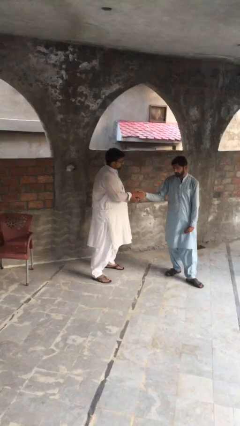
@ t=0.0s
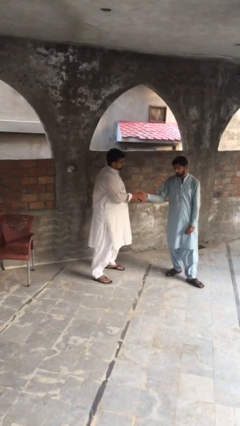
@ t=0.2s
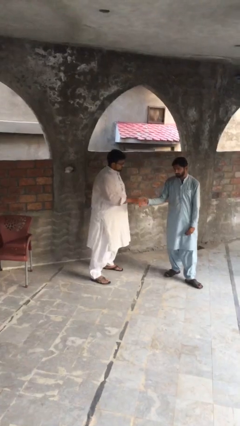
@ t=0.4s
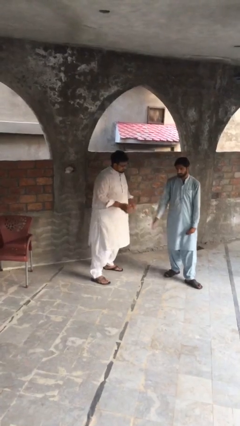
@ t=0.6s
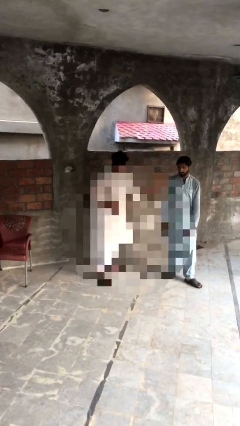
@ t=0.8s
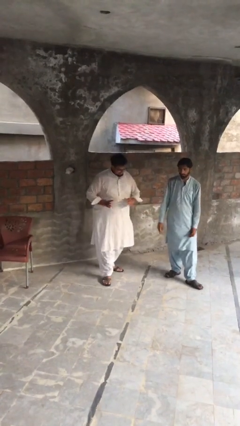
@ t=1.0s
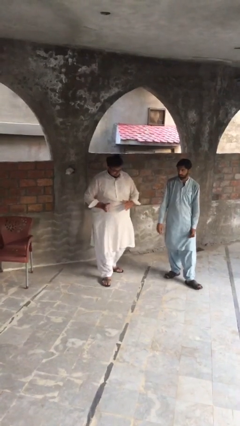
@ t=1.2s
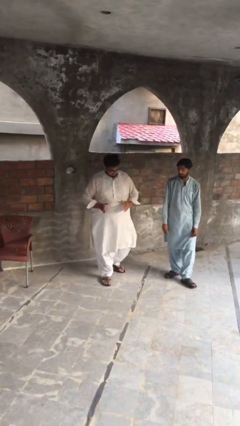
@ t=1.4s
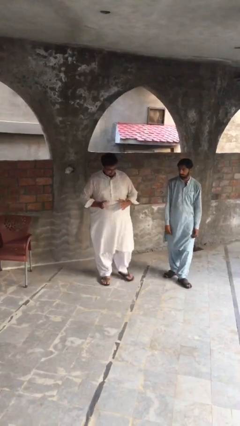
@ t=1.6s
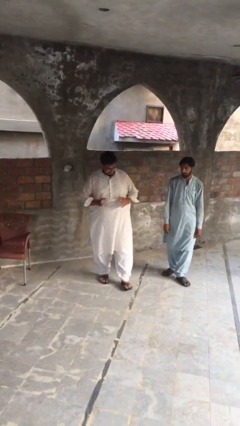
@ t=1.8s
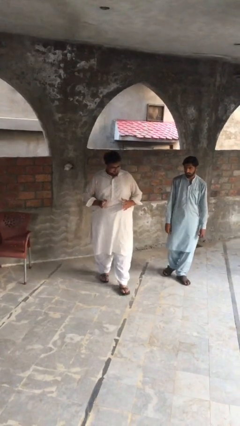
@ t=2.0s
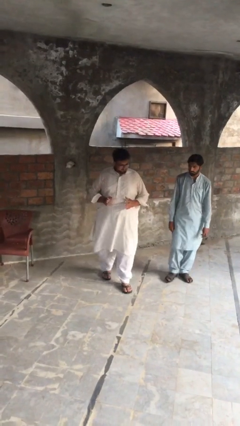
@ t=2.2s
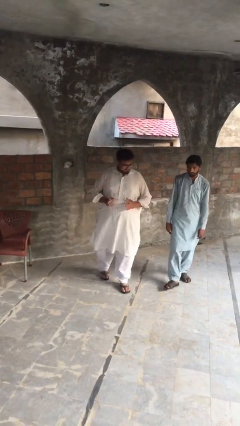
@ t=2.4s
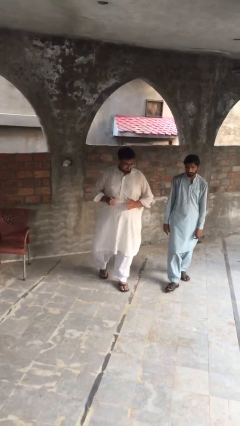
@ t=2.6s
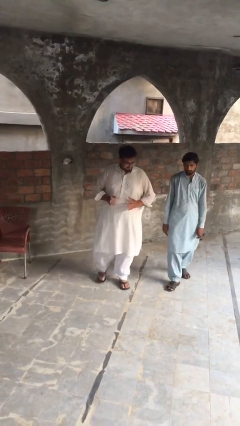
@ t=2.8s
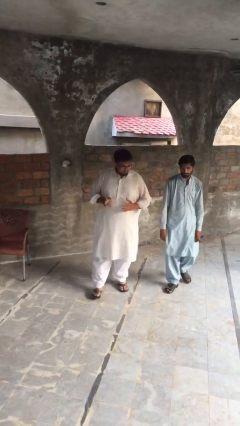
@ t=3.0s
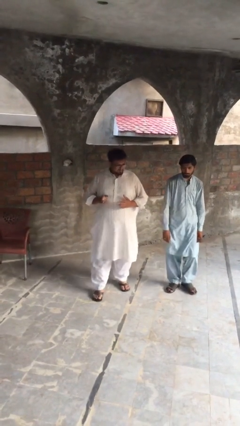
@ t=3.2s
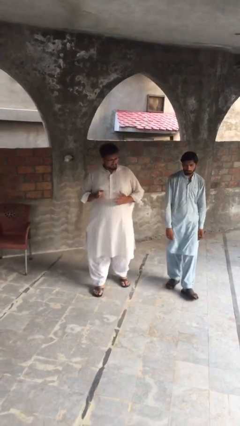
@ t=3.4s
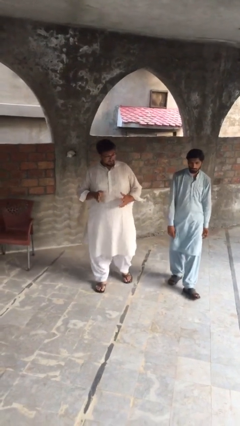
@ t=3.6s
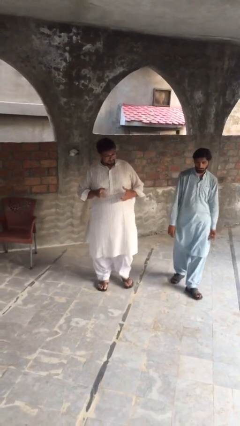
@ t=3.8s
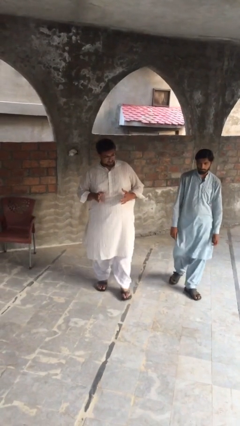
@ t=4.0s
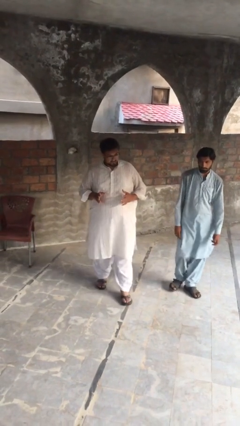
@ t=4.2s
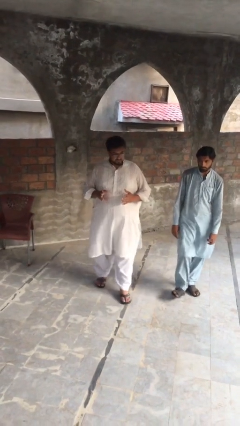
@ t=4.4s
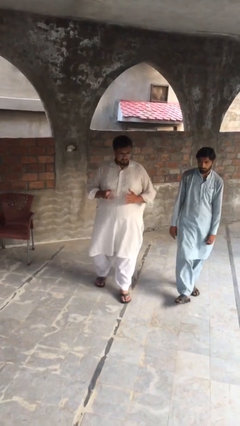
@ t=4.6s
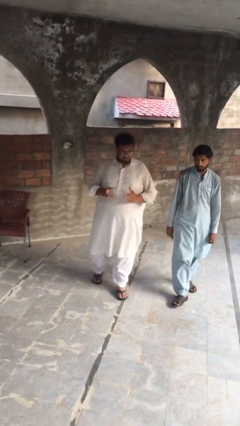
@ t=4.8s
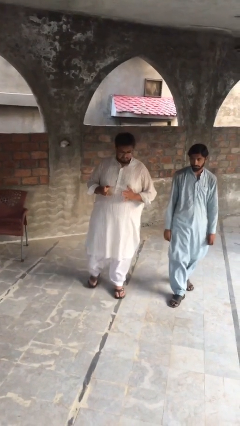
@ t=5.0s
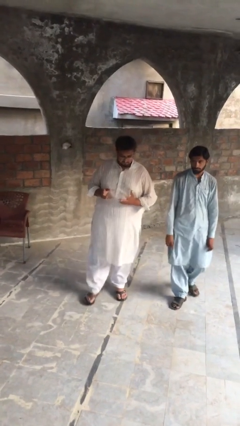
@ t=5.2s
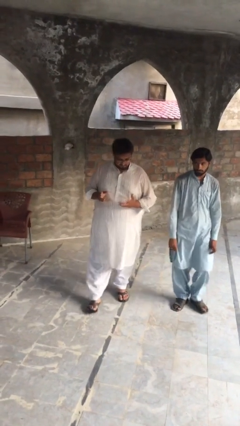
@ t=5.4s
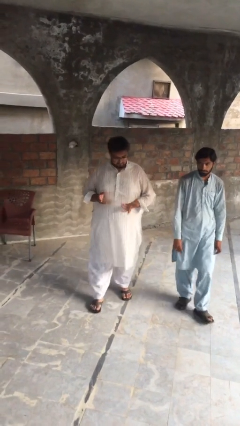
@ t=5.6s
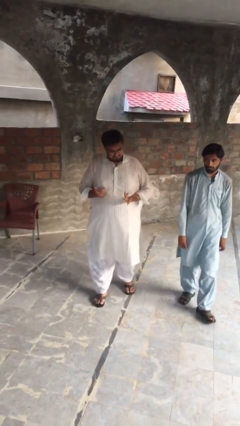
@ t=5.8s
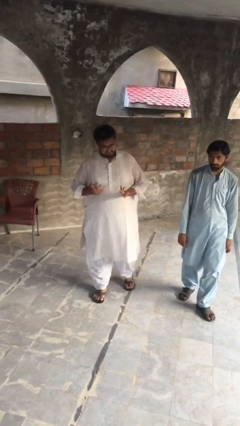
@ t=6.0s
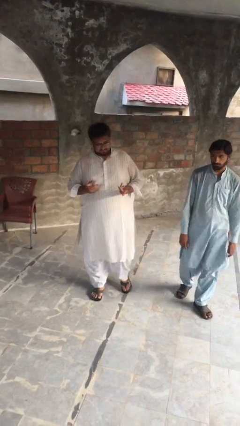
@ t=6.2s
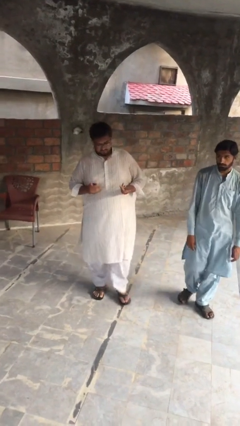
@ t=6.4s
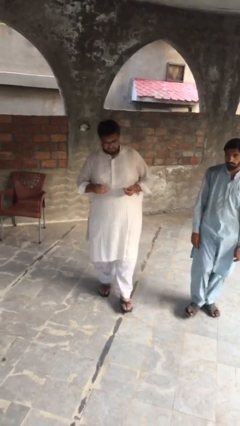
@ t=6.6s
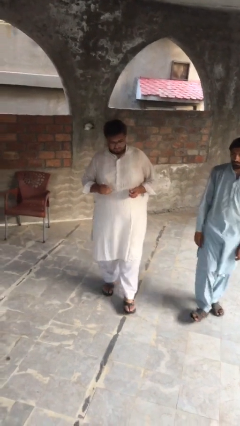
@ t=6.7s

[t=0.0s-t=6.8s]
person talks to person

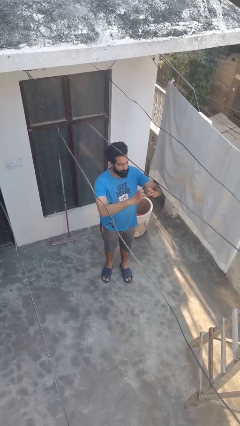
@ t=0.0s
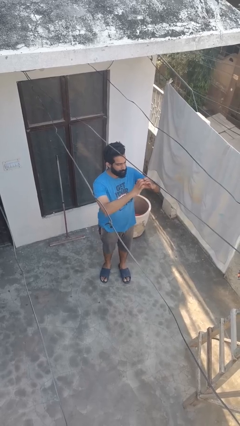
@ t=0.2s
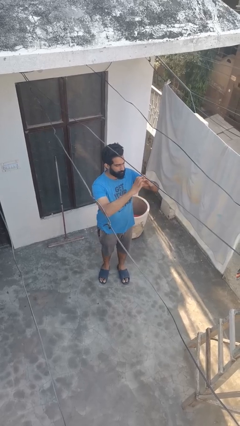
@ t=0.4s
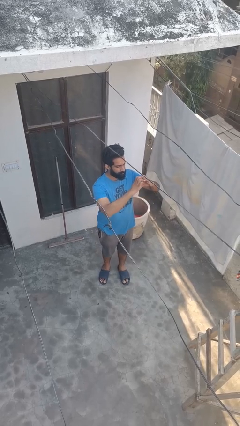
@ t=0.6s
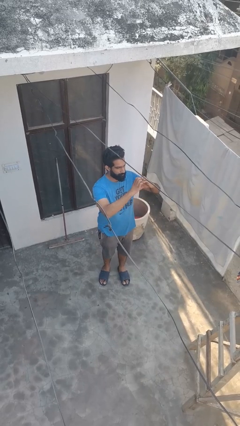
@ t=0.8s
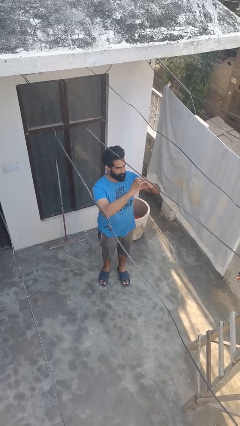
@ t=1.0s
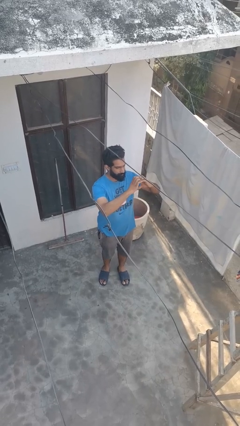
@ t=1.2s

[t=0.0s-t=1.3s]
person gestures heart

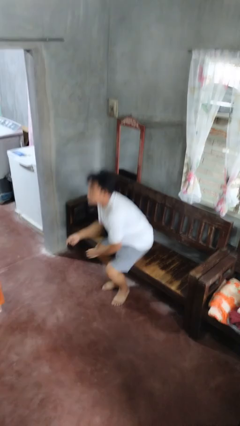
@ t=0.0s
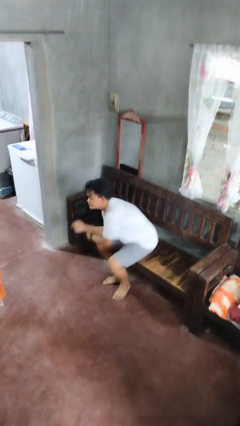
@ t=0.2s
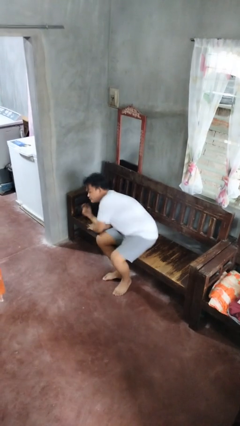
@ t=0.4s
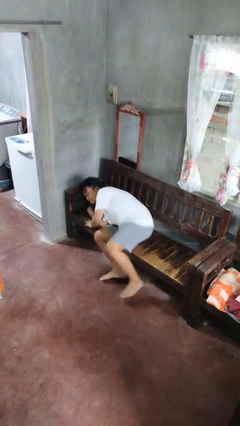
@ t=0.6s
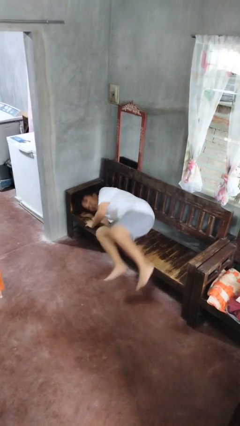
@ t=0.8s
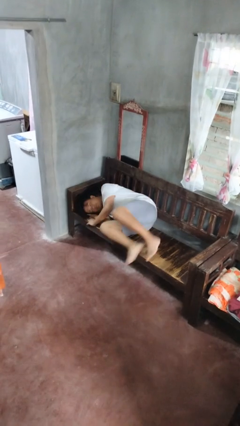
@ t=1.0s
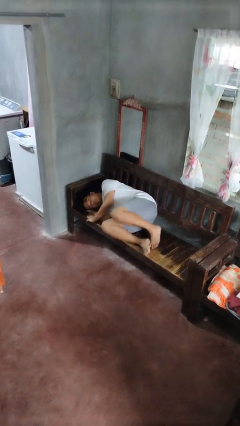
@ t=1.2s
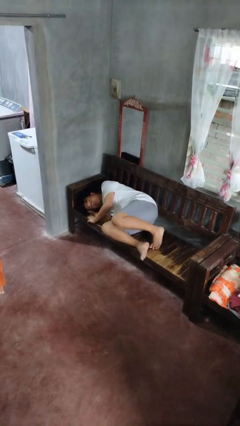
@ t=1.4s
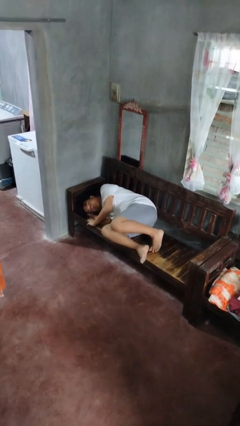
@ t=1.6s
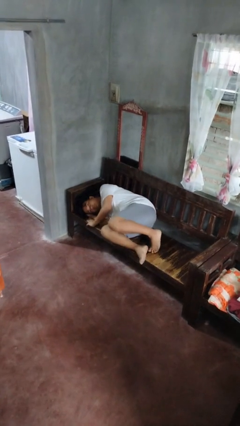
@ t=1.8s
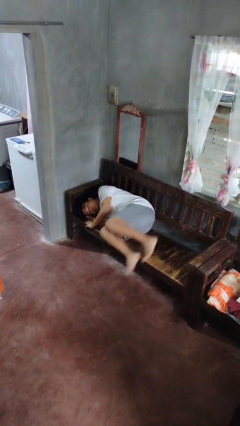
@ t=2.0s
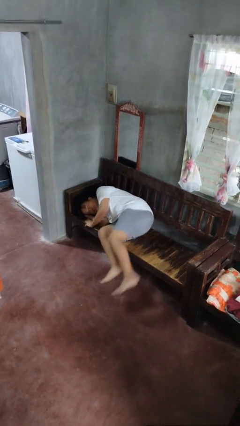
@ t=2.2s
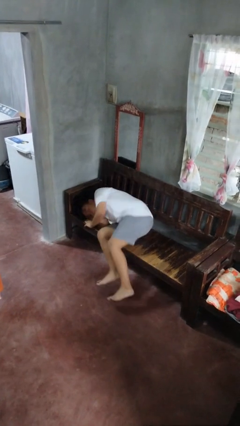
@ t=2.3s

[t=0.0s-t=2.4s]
person lies down on couch

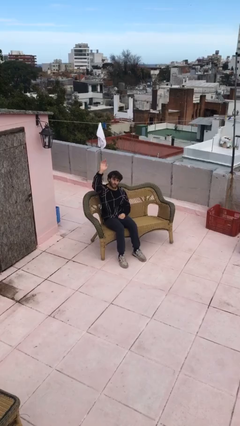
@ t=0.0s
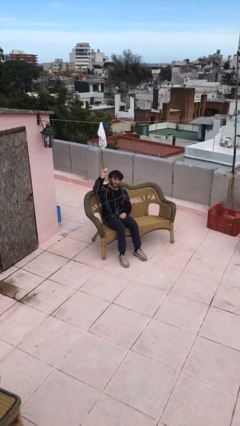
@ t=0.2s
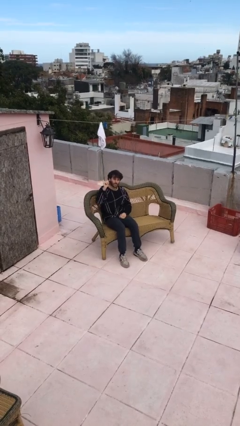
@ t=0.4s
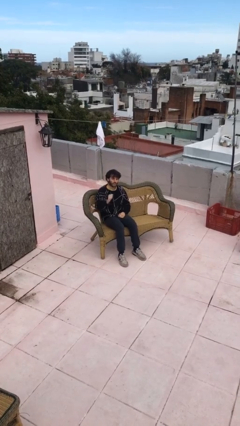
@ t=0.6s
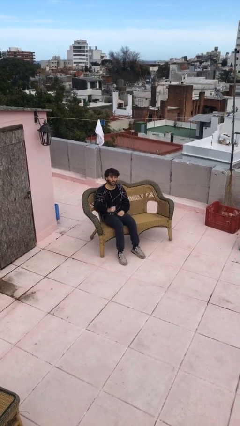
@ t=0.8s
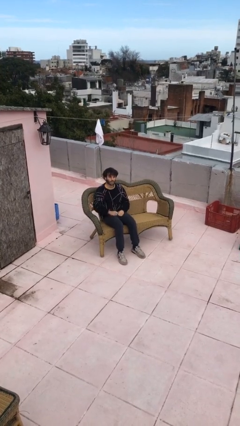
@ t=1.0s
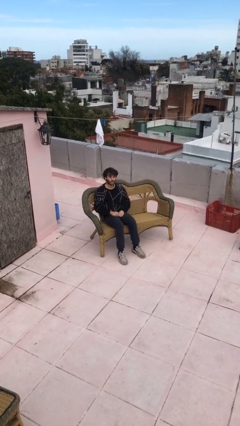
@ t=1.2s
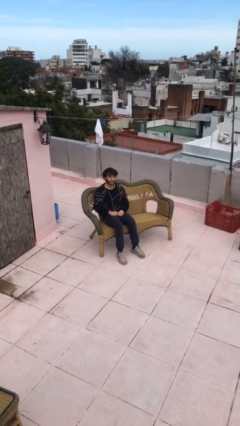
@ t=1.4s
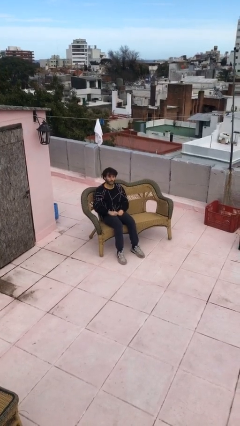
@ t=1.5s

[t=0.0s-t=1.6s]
person gestures lower hand

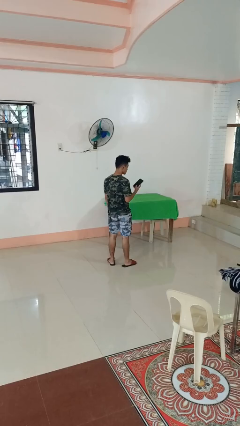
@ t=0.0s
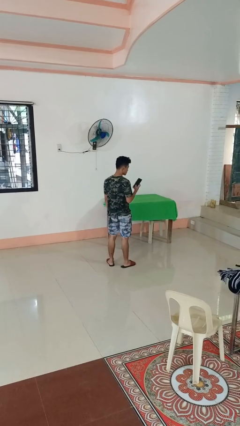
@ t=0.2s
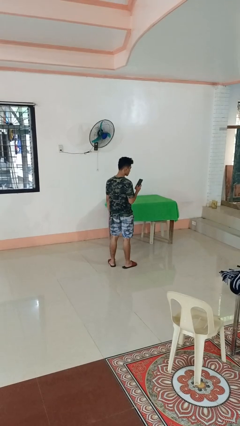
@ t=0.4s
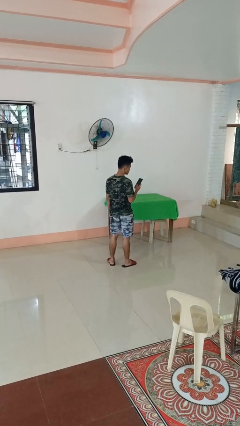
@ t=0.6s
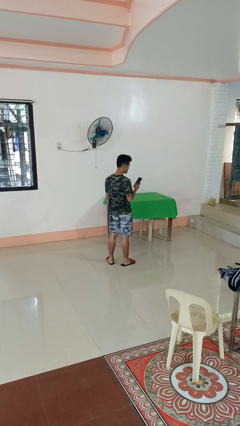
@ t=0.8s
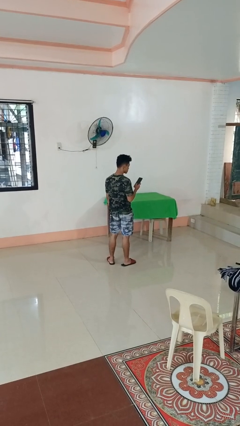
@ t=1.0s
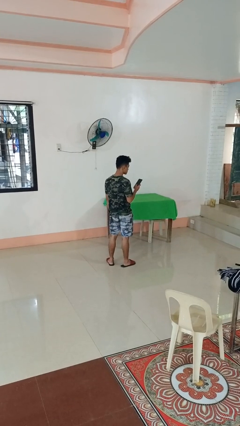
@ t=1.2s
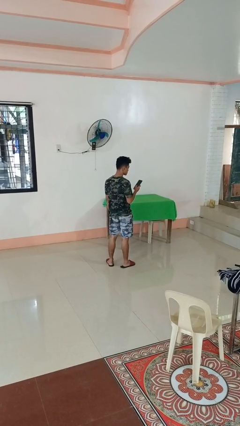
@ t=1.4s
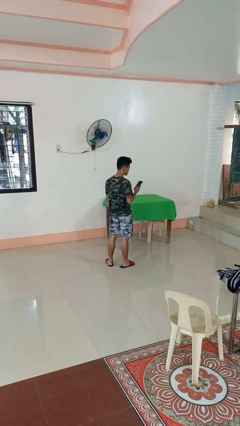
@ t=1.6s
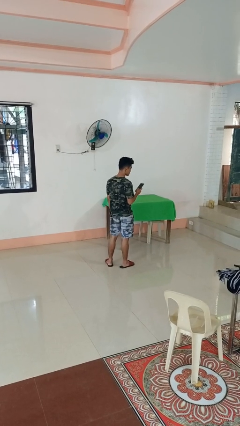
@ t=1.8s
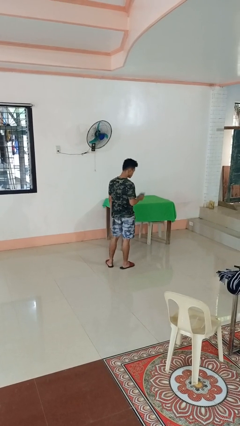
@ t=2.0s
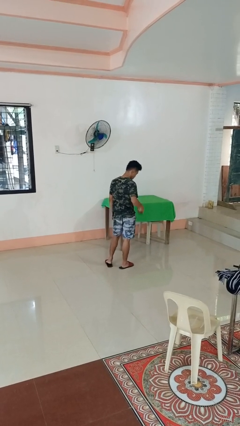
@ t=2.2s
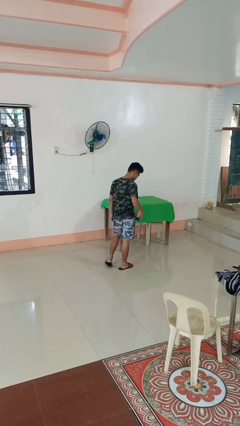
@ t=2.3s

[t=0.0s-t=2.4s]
person takes phone from pocket

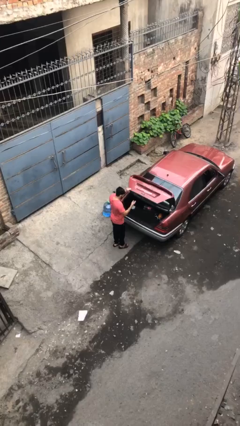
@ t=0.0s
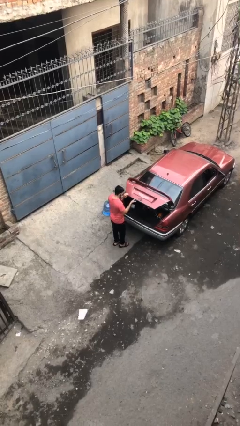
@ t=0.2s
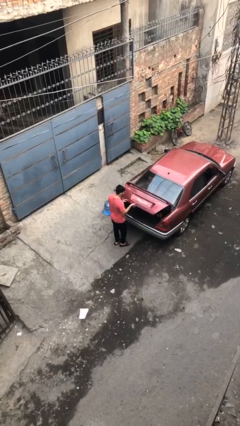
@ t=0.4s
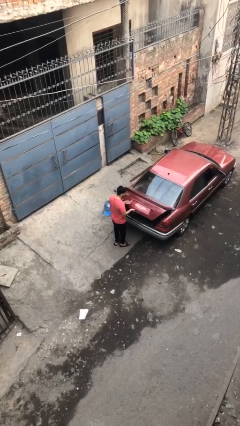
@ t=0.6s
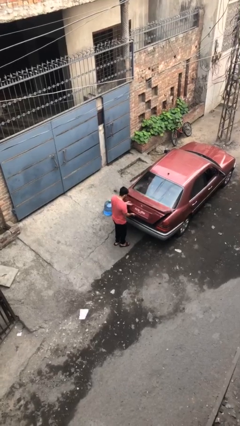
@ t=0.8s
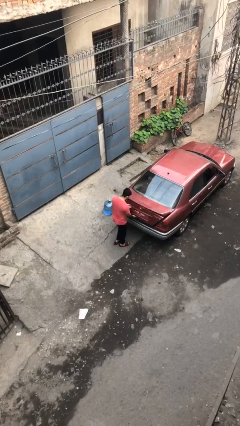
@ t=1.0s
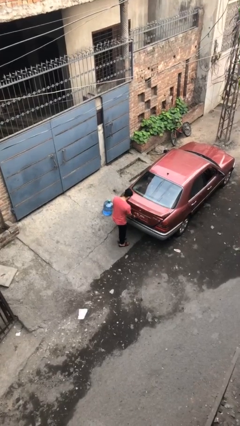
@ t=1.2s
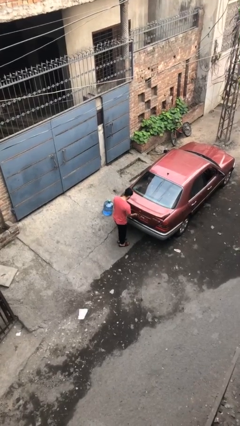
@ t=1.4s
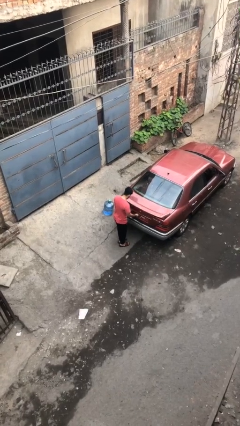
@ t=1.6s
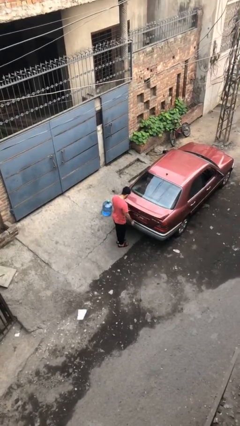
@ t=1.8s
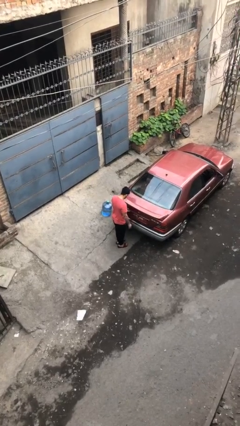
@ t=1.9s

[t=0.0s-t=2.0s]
person closes car trunk

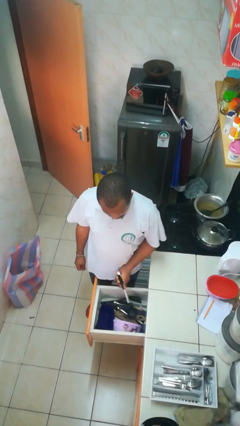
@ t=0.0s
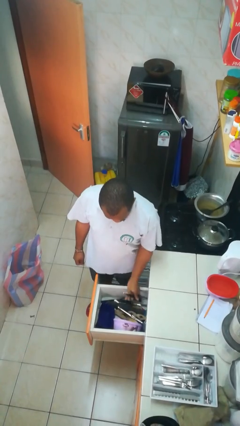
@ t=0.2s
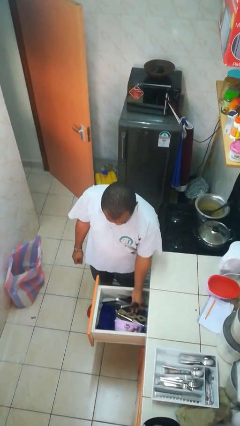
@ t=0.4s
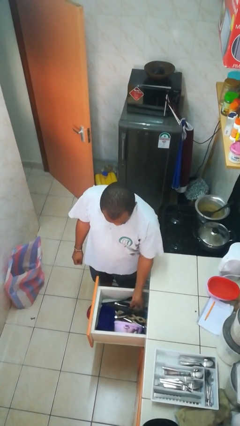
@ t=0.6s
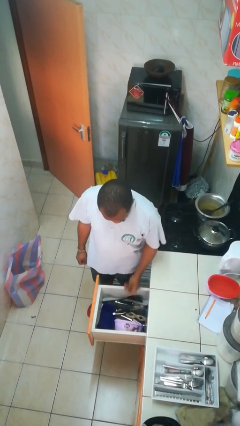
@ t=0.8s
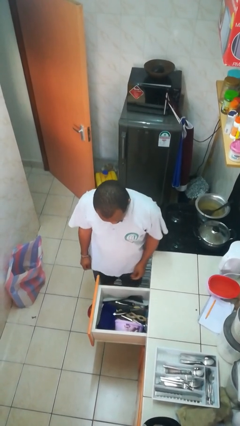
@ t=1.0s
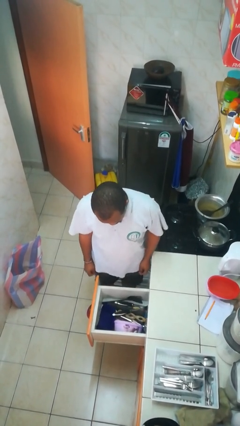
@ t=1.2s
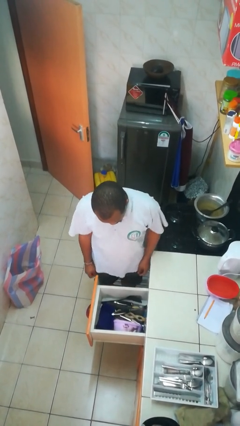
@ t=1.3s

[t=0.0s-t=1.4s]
person puts object into kitchen drawer
